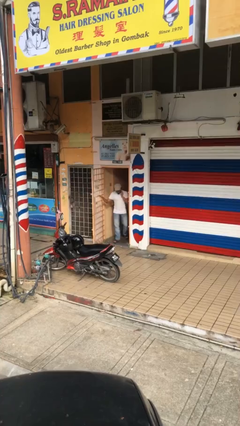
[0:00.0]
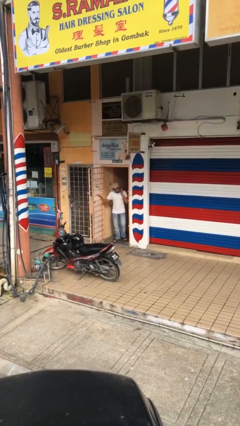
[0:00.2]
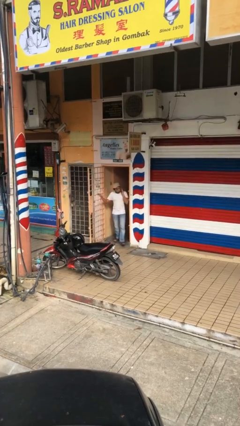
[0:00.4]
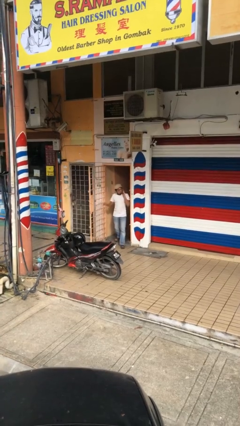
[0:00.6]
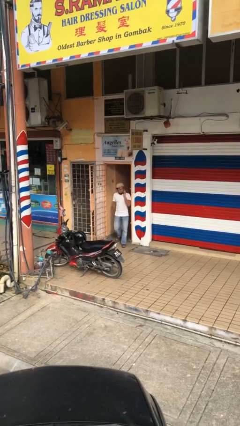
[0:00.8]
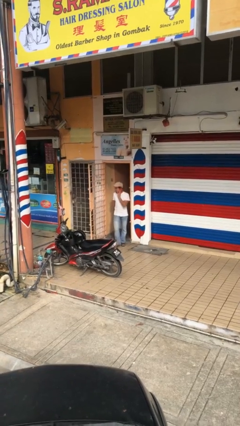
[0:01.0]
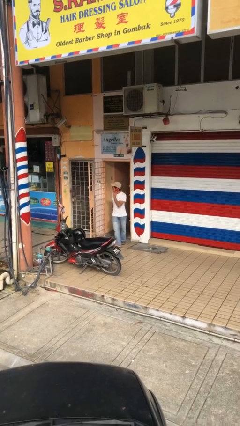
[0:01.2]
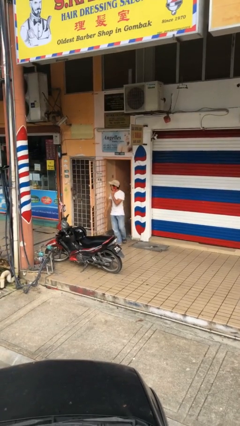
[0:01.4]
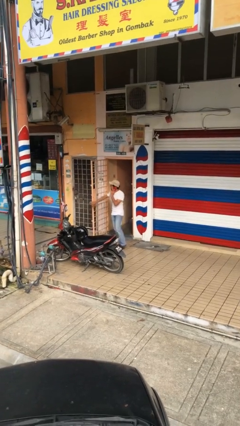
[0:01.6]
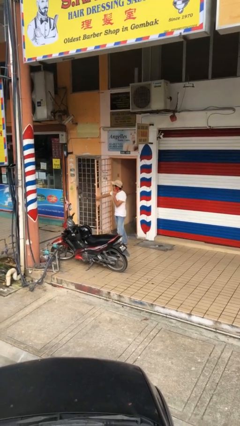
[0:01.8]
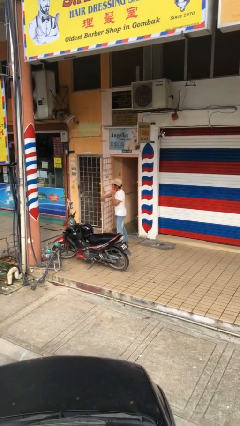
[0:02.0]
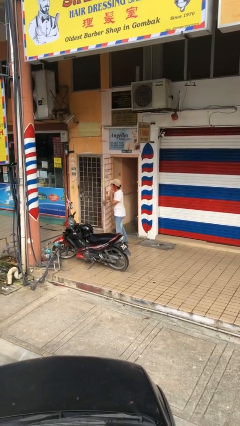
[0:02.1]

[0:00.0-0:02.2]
person enters scene through structure

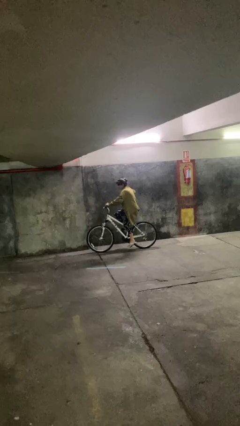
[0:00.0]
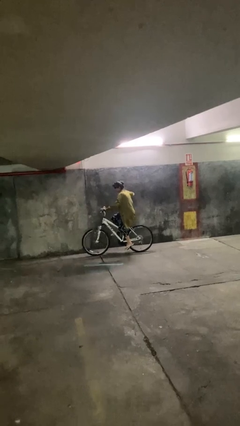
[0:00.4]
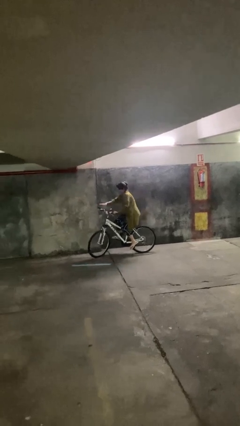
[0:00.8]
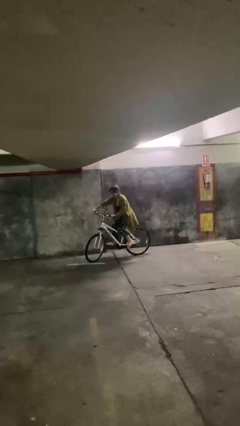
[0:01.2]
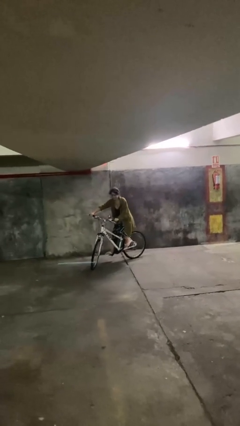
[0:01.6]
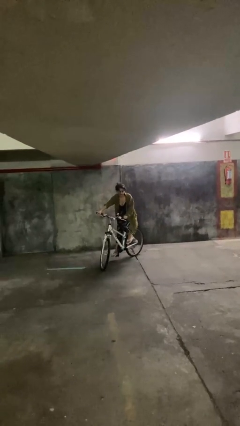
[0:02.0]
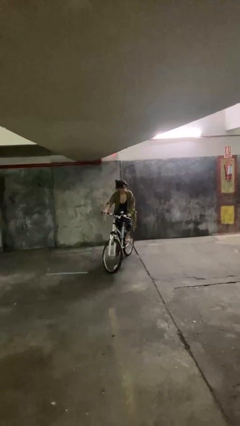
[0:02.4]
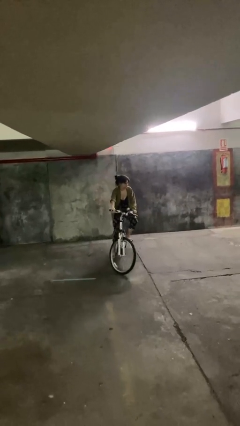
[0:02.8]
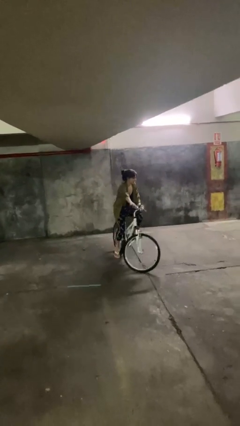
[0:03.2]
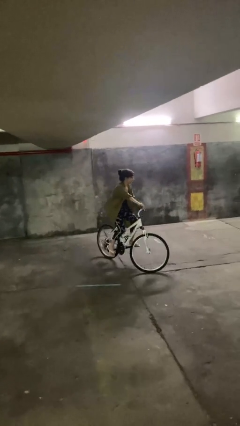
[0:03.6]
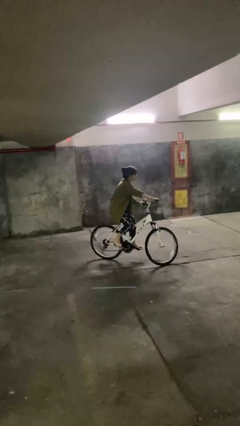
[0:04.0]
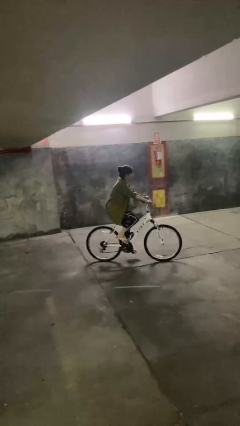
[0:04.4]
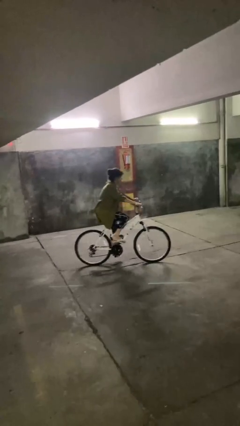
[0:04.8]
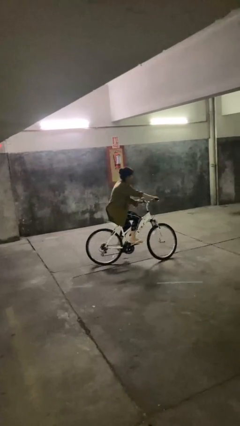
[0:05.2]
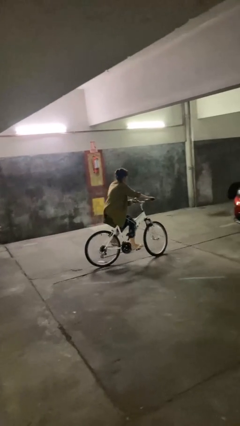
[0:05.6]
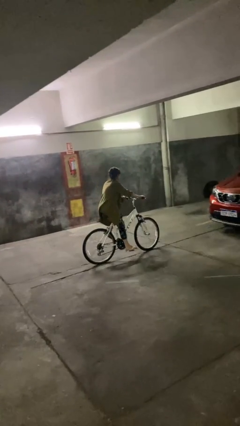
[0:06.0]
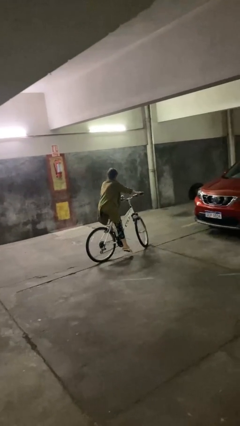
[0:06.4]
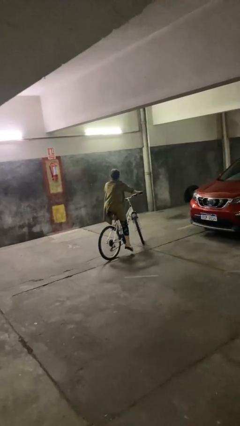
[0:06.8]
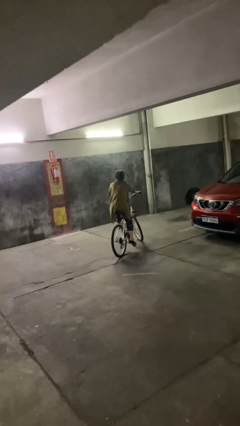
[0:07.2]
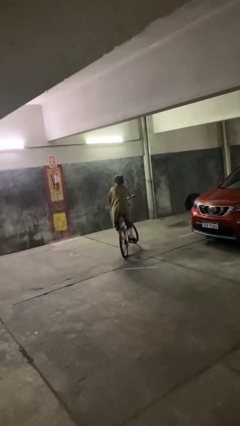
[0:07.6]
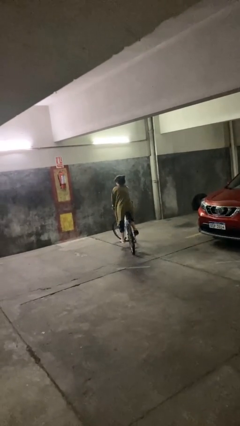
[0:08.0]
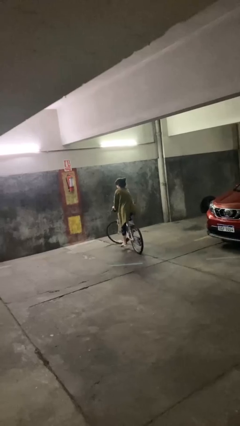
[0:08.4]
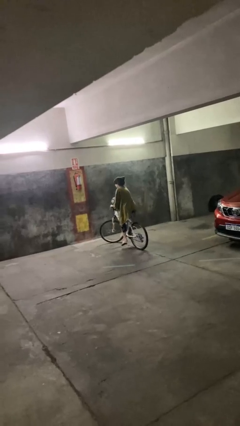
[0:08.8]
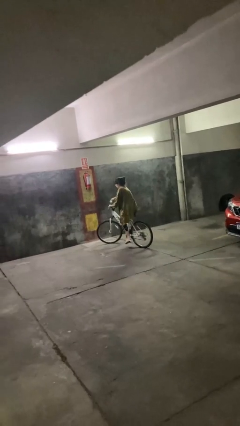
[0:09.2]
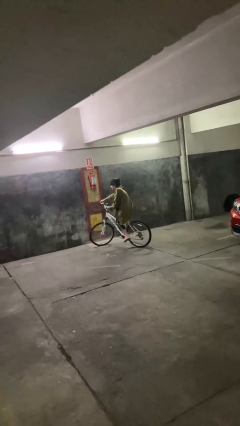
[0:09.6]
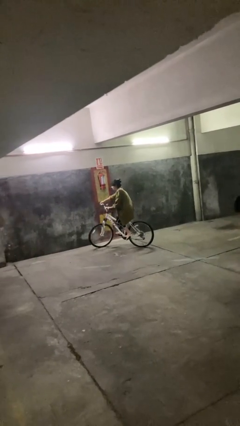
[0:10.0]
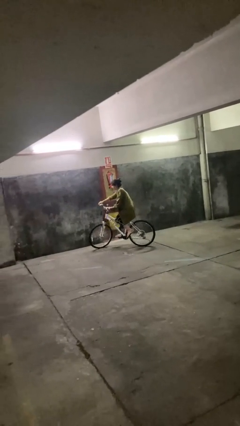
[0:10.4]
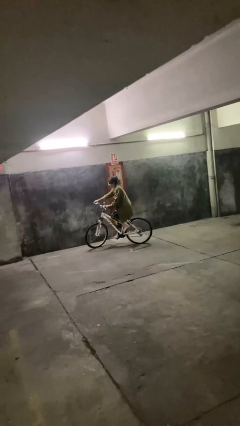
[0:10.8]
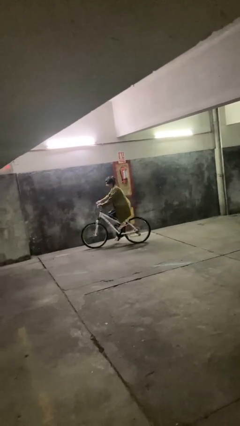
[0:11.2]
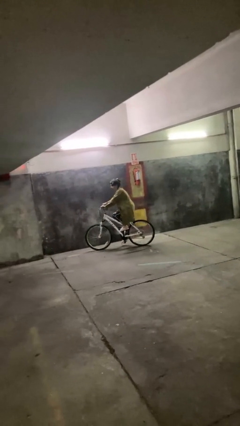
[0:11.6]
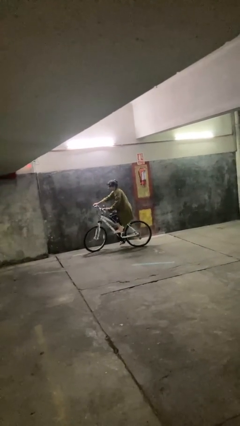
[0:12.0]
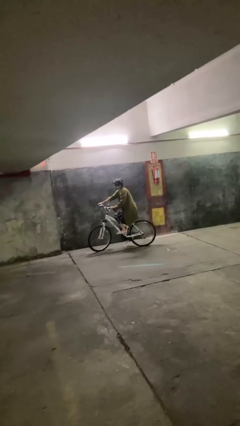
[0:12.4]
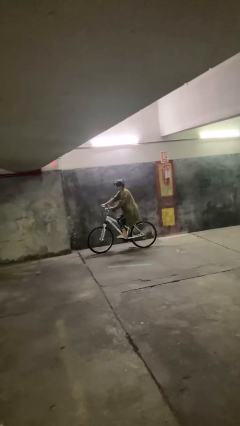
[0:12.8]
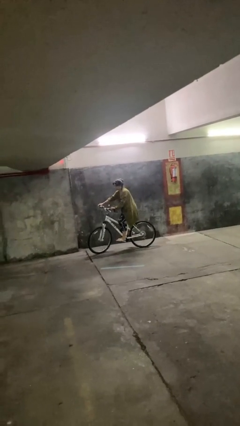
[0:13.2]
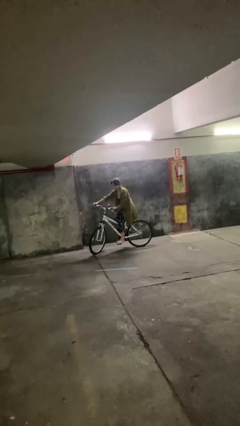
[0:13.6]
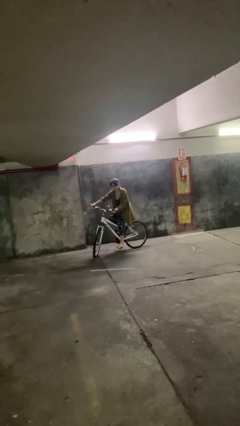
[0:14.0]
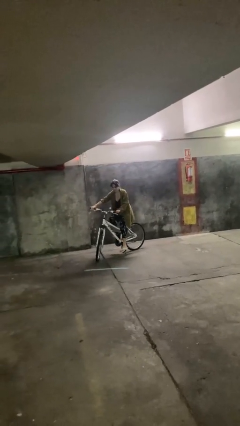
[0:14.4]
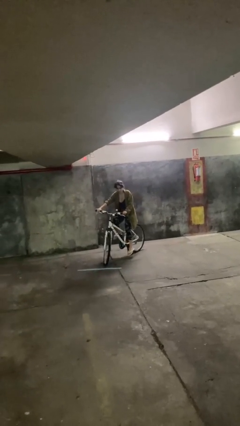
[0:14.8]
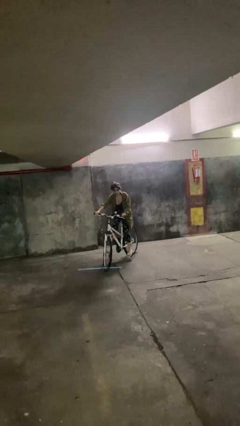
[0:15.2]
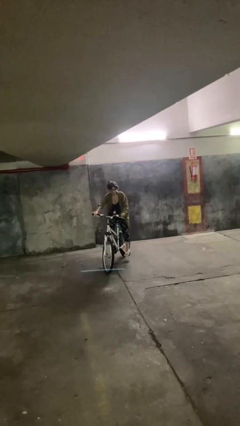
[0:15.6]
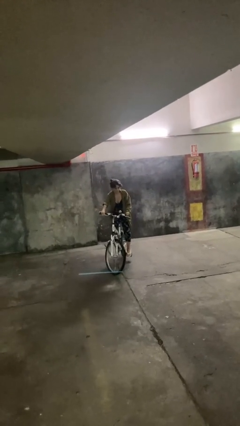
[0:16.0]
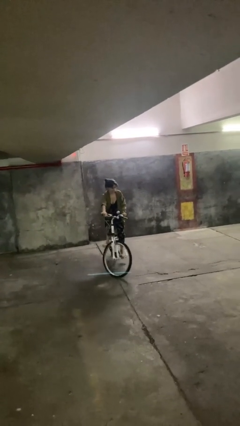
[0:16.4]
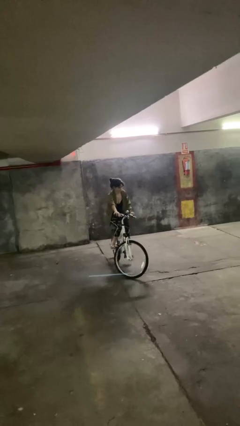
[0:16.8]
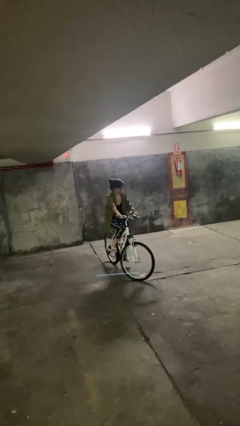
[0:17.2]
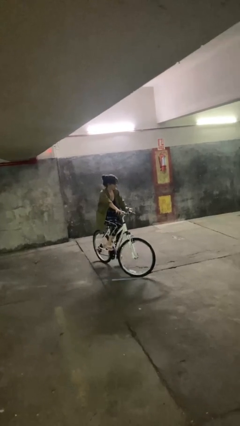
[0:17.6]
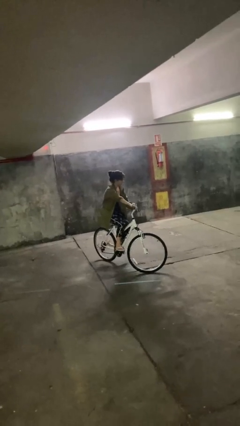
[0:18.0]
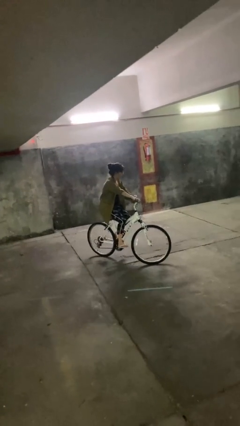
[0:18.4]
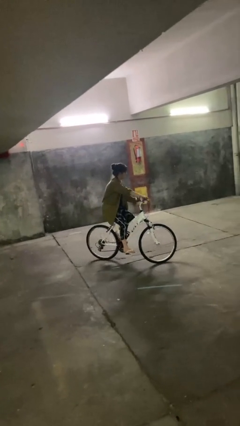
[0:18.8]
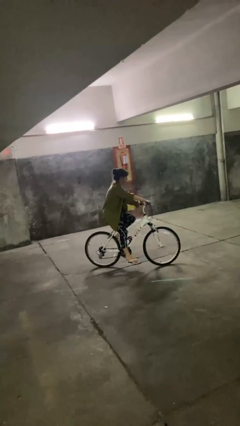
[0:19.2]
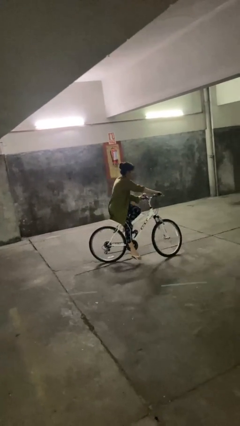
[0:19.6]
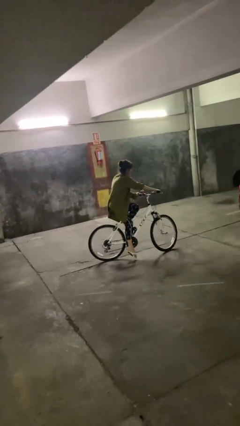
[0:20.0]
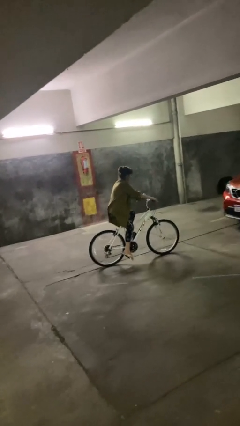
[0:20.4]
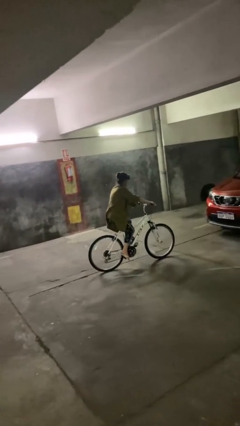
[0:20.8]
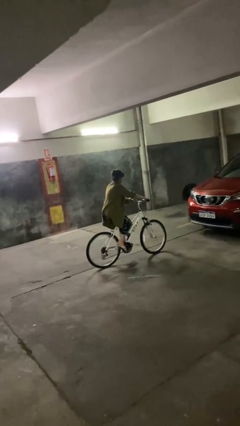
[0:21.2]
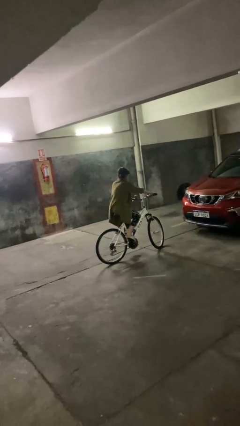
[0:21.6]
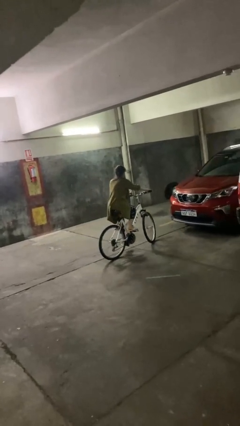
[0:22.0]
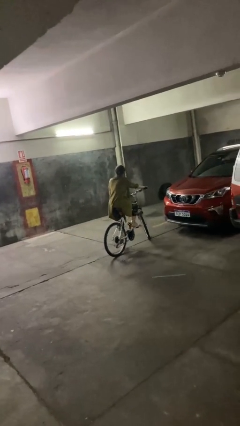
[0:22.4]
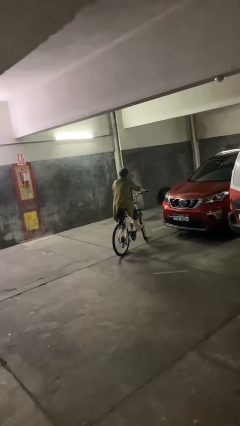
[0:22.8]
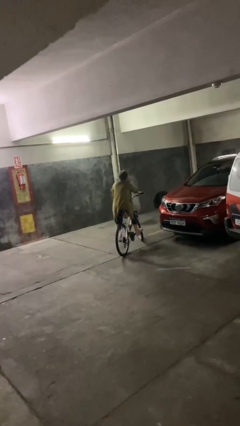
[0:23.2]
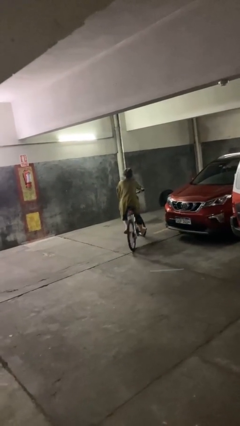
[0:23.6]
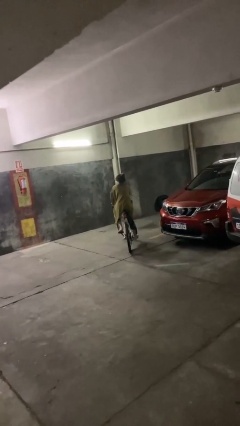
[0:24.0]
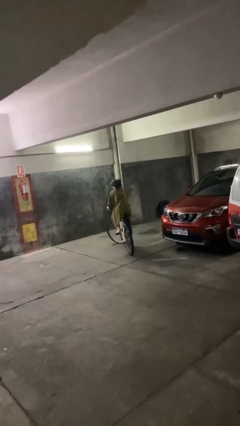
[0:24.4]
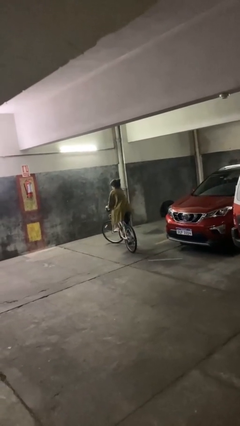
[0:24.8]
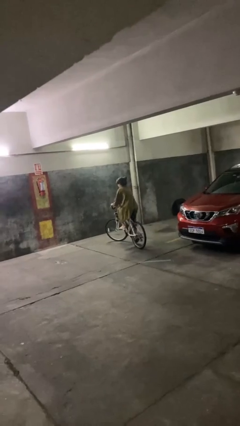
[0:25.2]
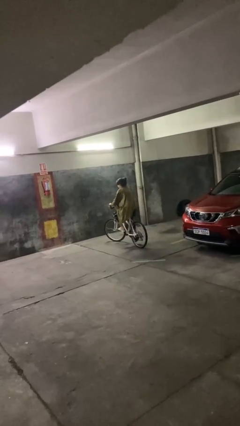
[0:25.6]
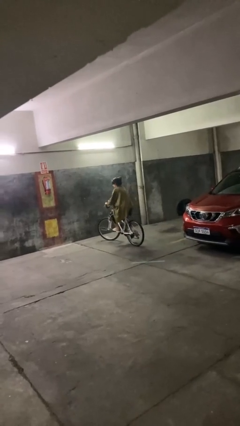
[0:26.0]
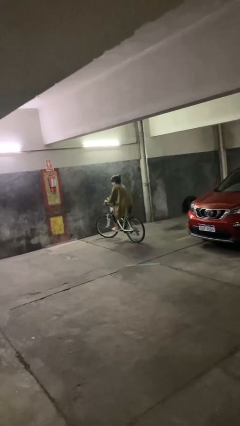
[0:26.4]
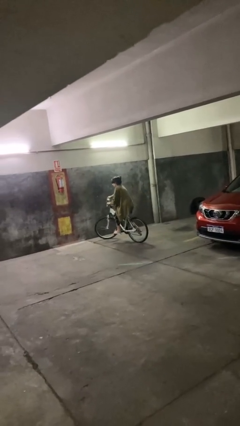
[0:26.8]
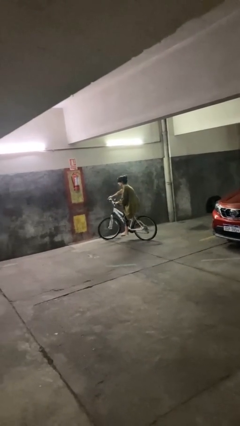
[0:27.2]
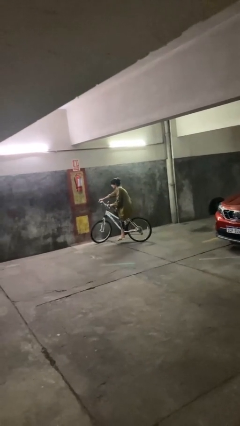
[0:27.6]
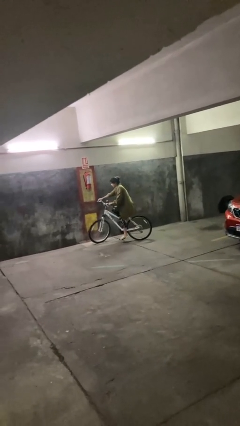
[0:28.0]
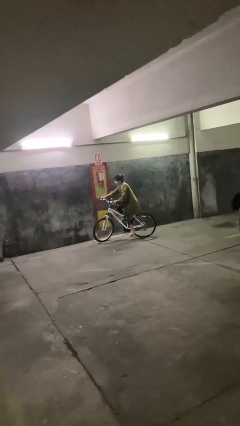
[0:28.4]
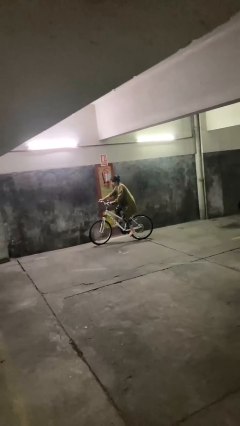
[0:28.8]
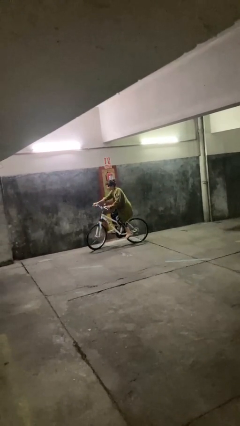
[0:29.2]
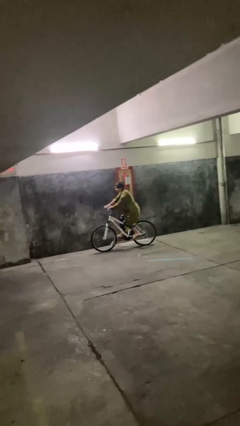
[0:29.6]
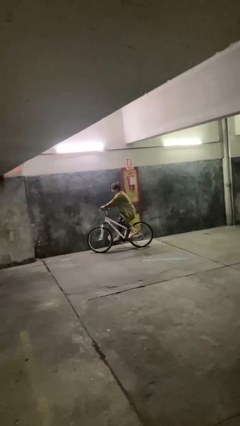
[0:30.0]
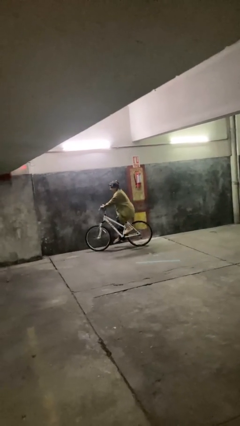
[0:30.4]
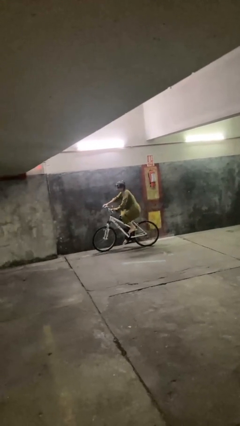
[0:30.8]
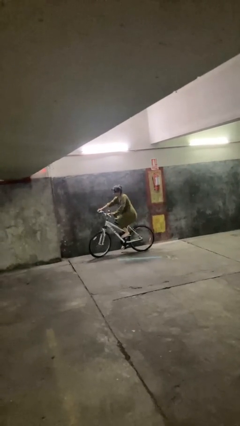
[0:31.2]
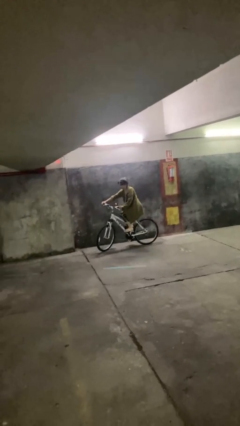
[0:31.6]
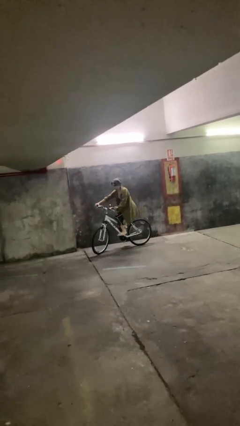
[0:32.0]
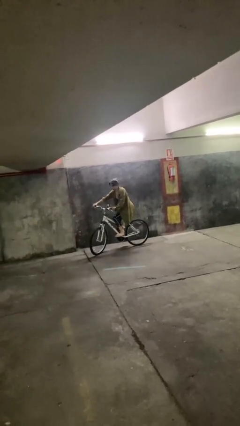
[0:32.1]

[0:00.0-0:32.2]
person rides bicycle
